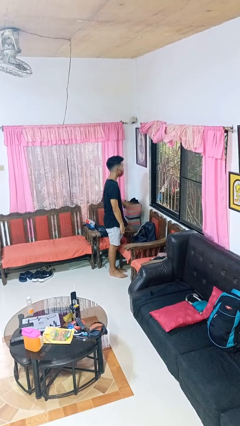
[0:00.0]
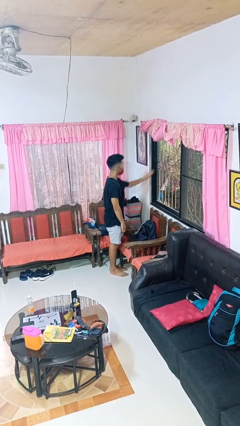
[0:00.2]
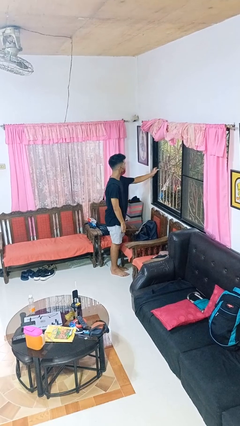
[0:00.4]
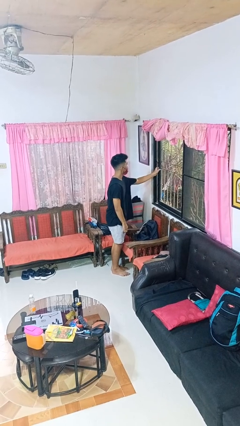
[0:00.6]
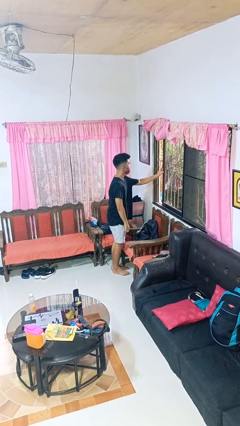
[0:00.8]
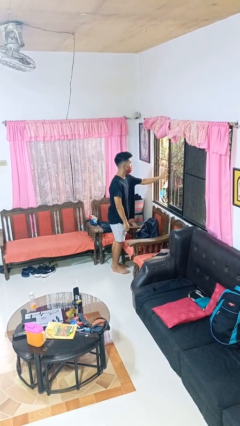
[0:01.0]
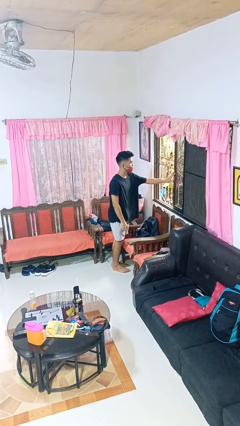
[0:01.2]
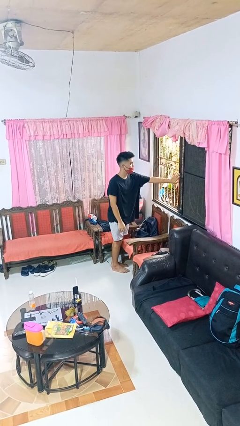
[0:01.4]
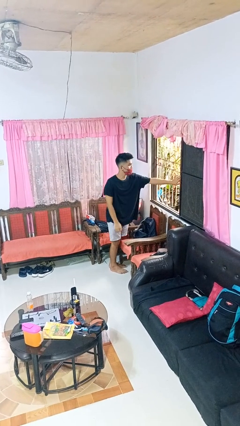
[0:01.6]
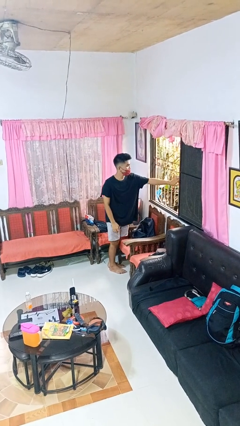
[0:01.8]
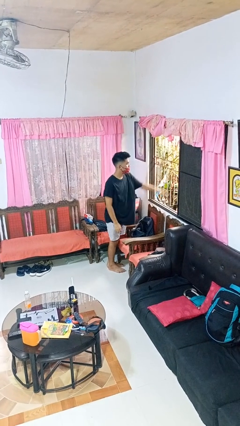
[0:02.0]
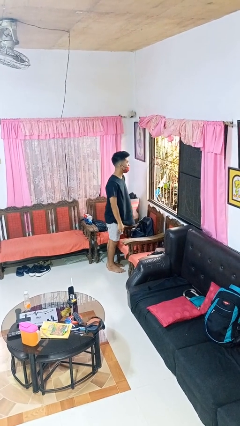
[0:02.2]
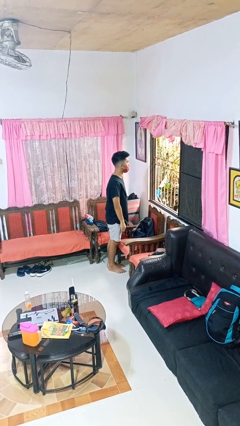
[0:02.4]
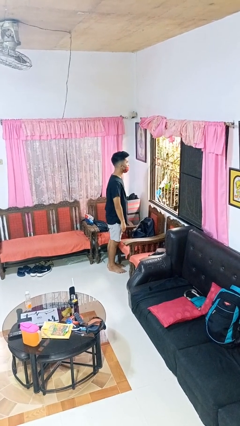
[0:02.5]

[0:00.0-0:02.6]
person opens home window

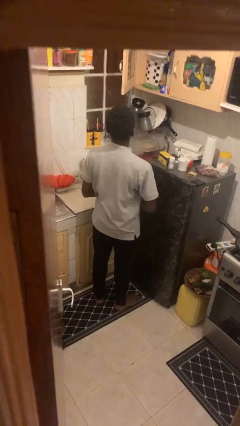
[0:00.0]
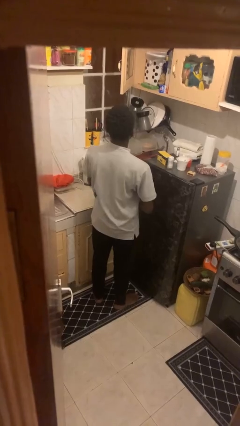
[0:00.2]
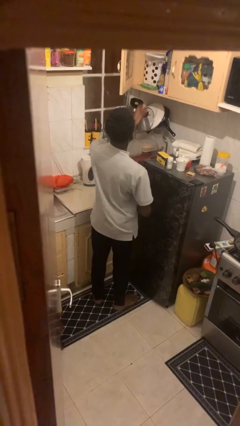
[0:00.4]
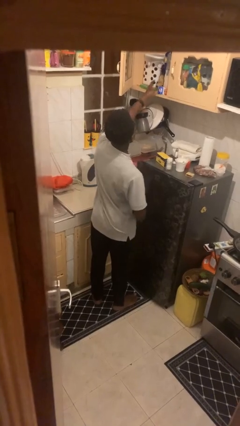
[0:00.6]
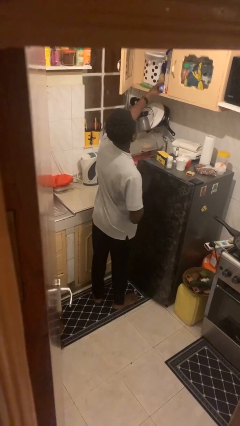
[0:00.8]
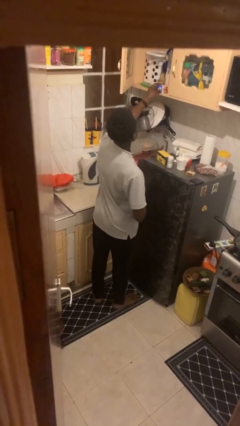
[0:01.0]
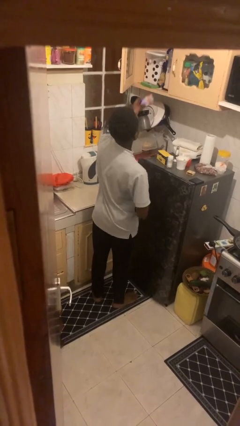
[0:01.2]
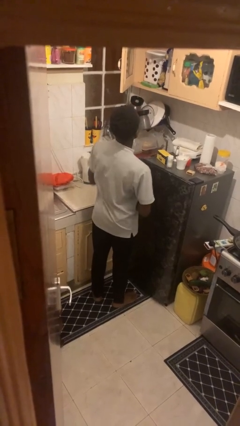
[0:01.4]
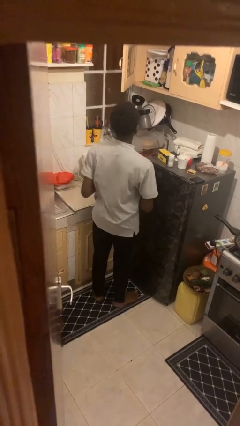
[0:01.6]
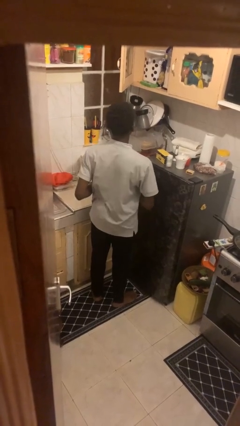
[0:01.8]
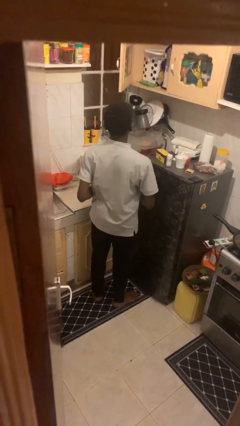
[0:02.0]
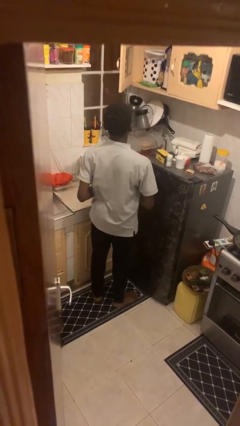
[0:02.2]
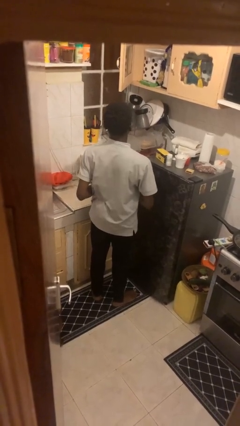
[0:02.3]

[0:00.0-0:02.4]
person picks up object from cabinet

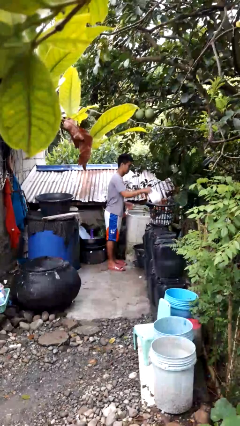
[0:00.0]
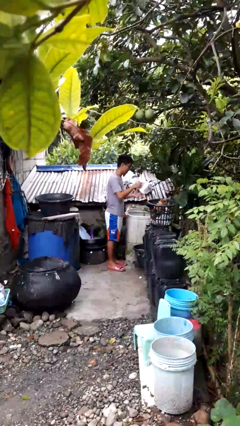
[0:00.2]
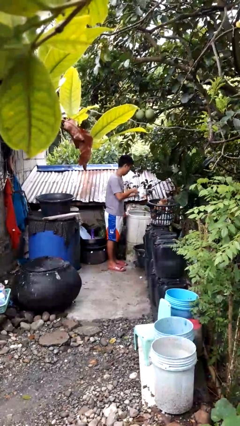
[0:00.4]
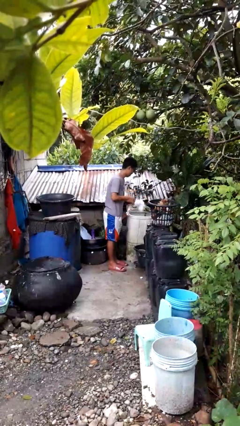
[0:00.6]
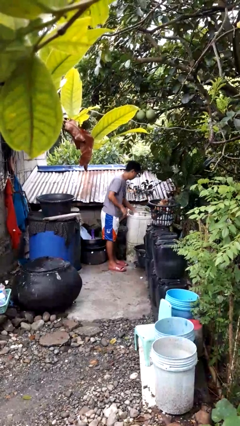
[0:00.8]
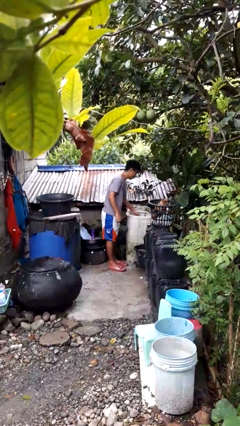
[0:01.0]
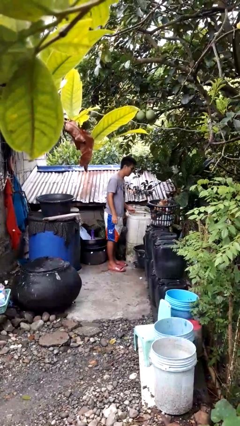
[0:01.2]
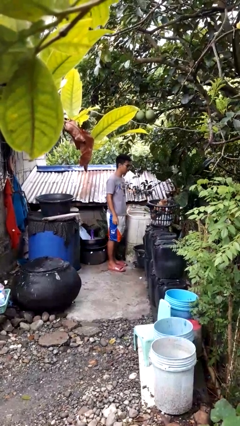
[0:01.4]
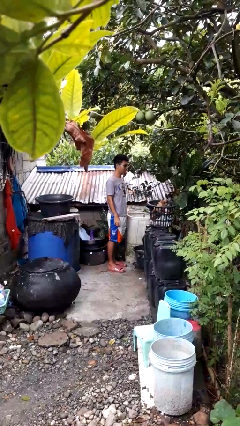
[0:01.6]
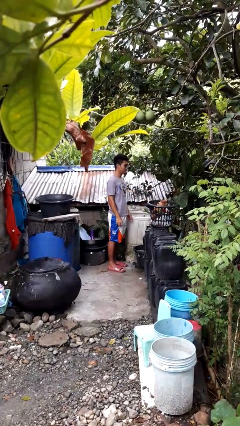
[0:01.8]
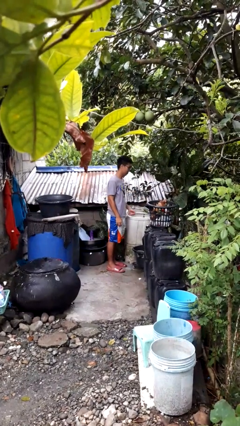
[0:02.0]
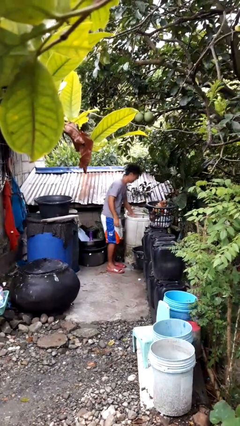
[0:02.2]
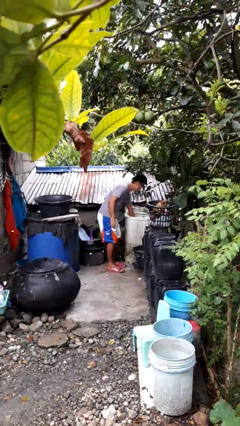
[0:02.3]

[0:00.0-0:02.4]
person loads clotheswasher

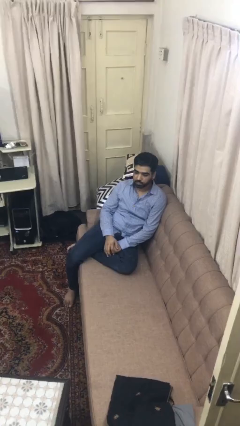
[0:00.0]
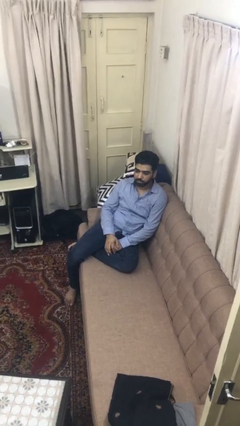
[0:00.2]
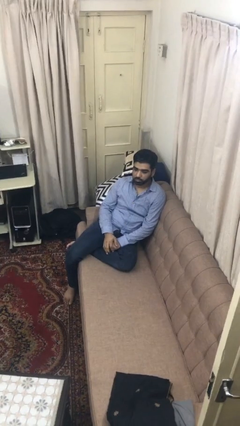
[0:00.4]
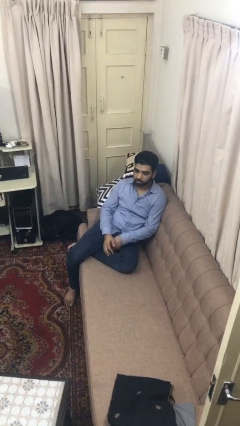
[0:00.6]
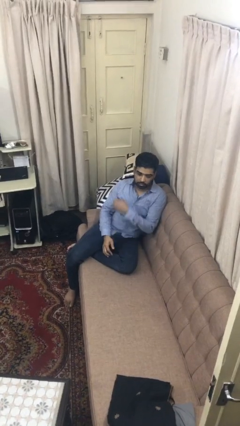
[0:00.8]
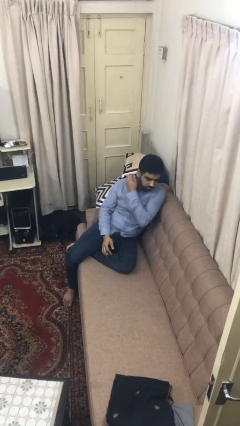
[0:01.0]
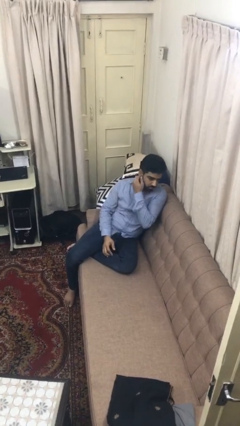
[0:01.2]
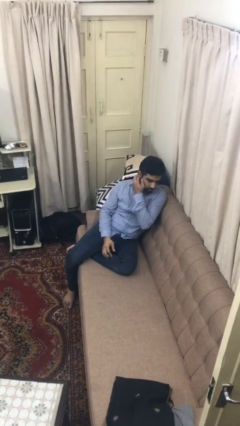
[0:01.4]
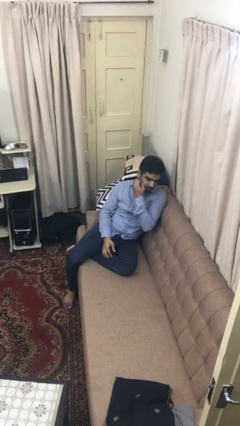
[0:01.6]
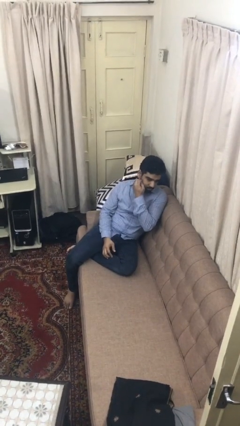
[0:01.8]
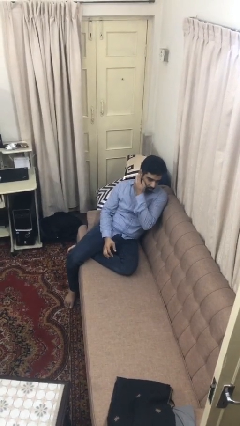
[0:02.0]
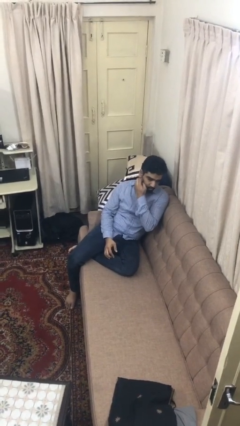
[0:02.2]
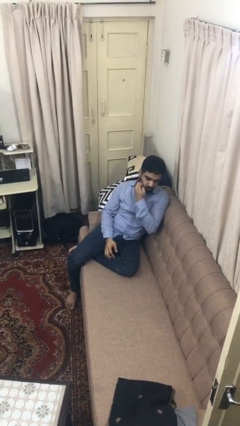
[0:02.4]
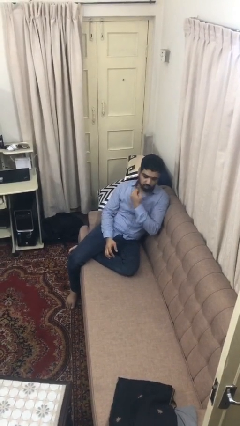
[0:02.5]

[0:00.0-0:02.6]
person scratches face

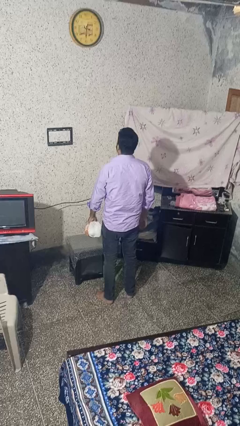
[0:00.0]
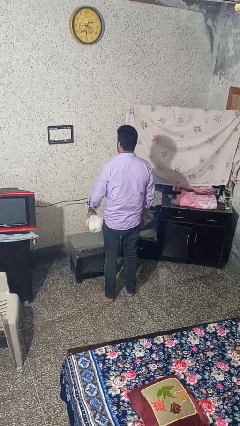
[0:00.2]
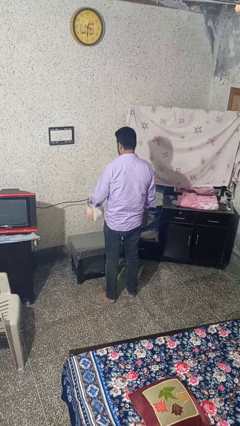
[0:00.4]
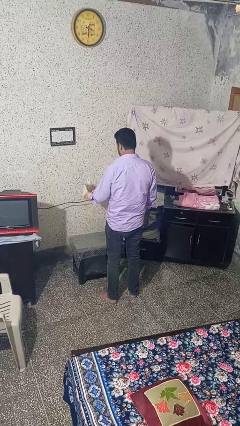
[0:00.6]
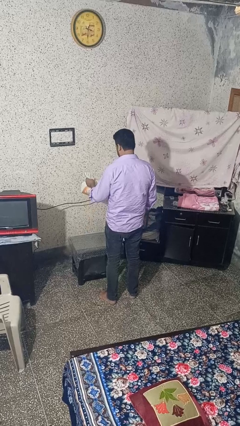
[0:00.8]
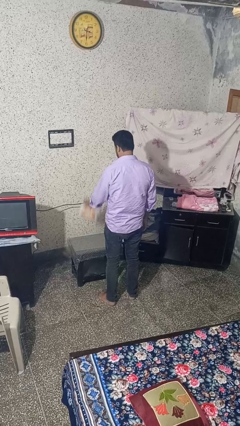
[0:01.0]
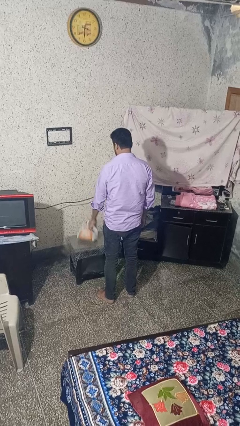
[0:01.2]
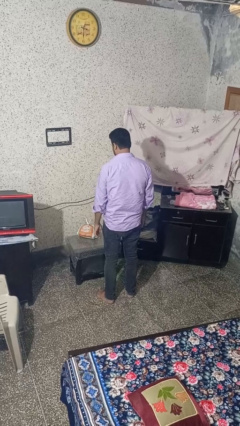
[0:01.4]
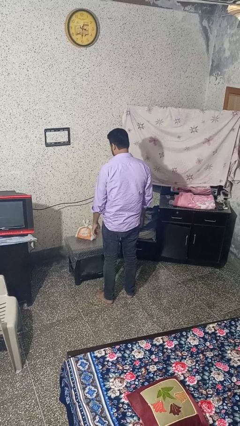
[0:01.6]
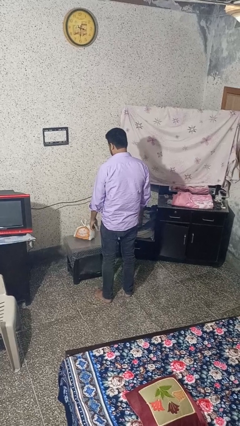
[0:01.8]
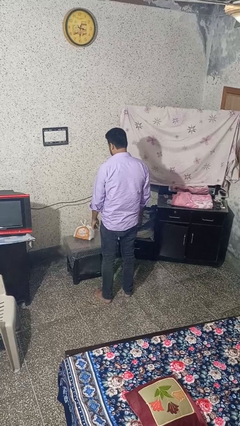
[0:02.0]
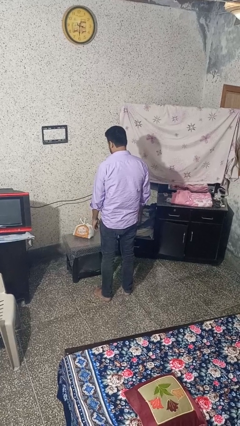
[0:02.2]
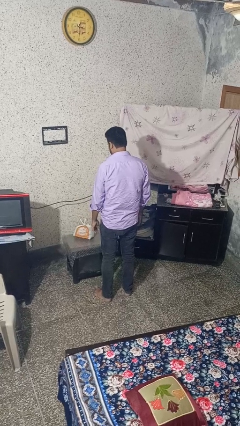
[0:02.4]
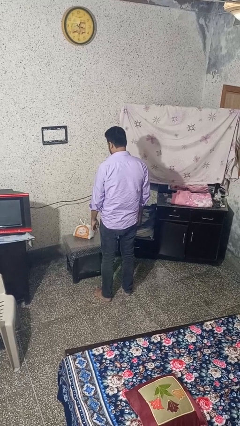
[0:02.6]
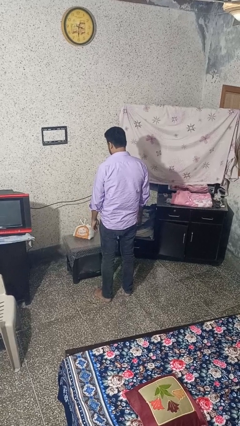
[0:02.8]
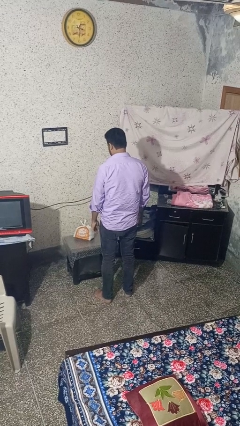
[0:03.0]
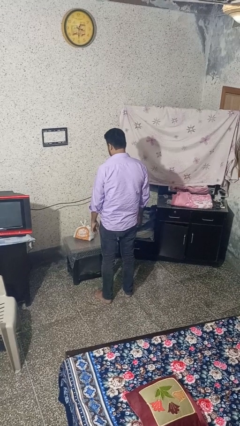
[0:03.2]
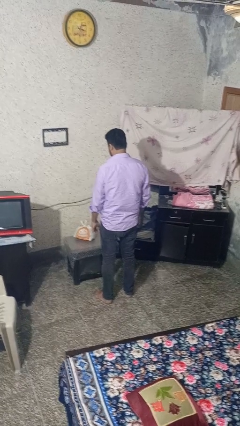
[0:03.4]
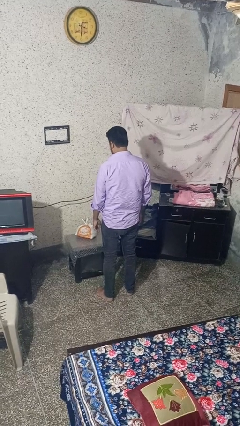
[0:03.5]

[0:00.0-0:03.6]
person throws object on table

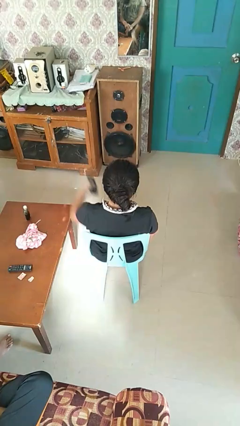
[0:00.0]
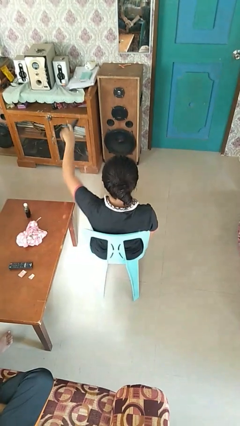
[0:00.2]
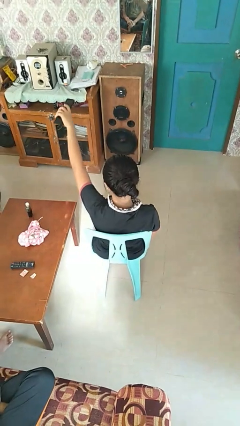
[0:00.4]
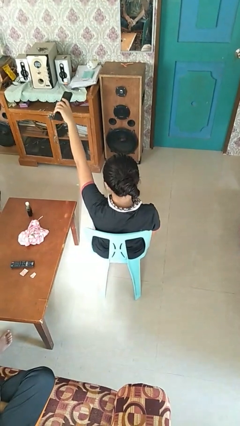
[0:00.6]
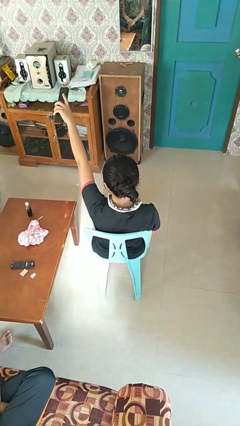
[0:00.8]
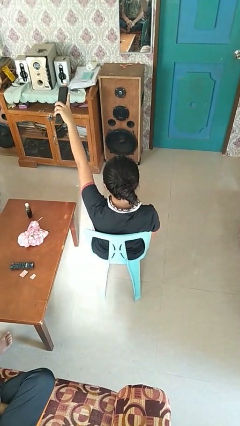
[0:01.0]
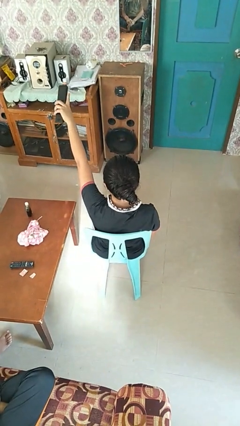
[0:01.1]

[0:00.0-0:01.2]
person uses television remote

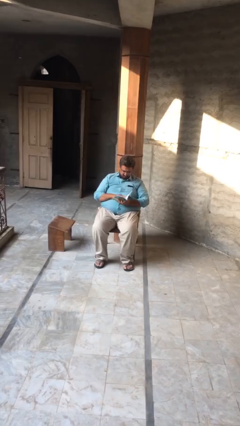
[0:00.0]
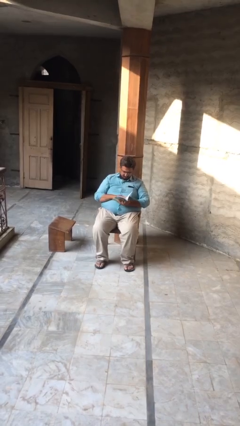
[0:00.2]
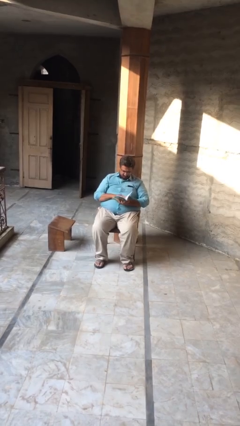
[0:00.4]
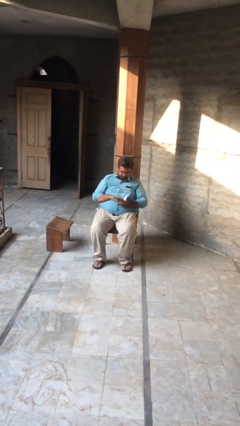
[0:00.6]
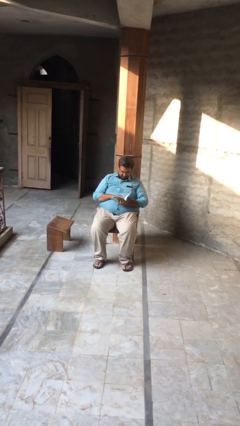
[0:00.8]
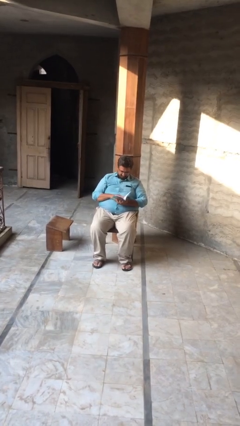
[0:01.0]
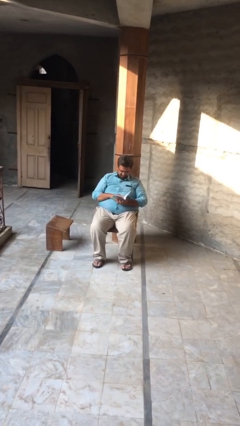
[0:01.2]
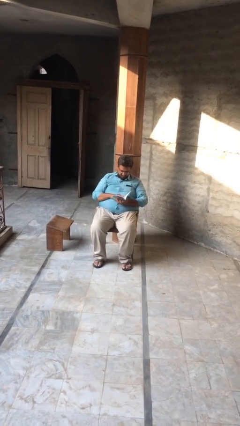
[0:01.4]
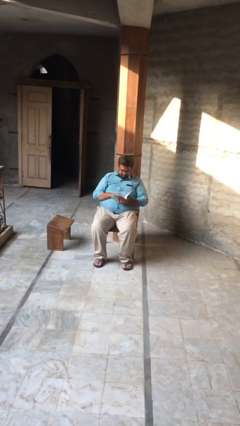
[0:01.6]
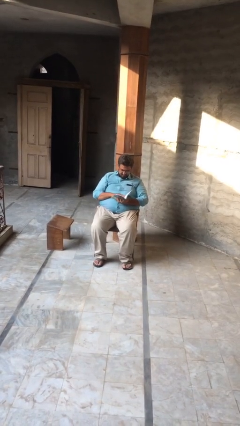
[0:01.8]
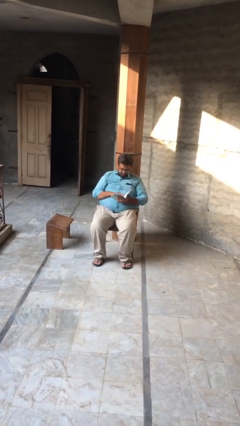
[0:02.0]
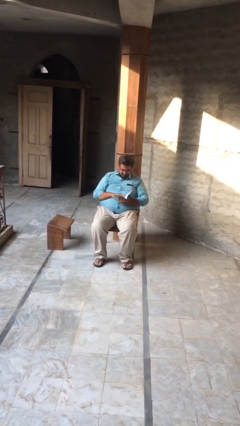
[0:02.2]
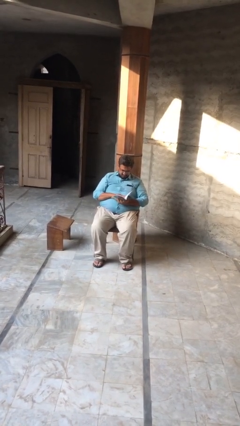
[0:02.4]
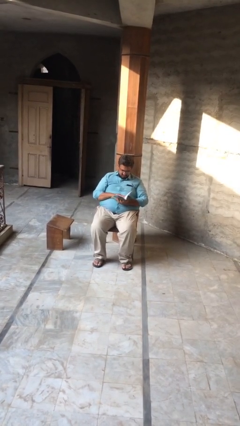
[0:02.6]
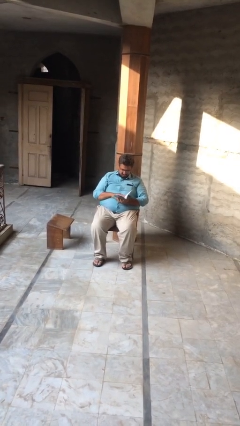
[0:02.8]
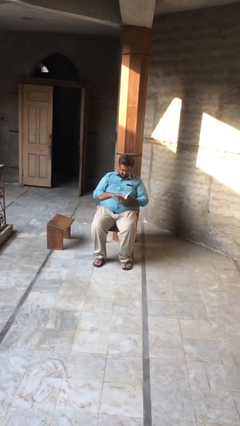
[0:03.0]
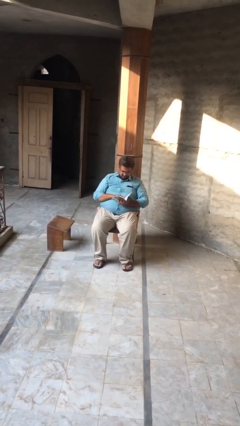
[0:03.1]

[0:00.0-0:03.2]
person reads document
